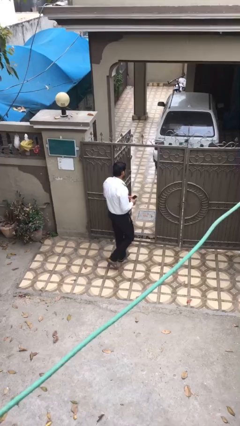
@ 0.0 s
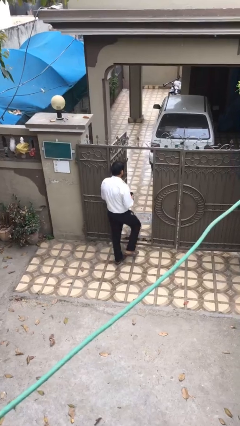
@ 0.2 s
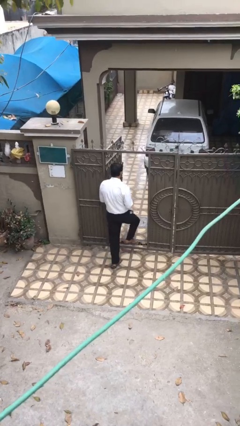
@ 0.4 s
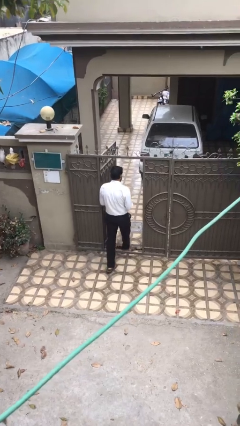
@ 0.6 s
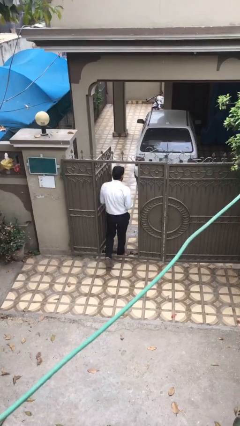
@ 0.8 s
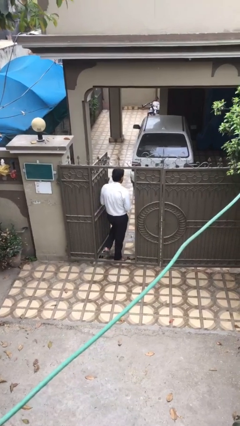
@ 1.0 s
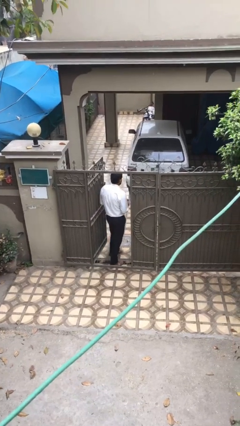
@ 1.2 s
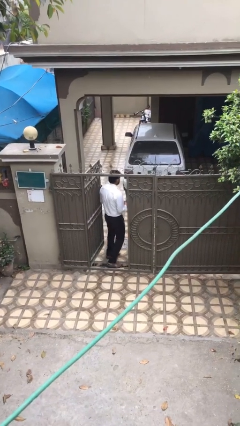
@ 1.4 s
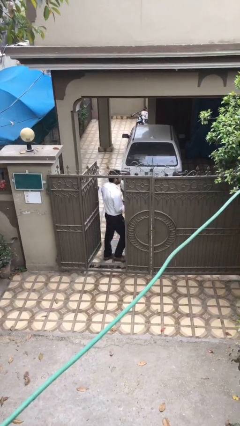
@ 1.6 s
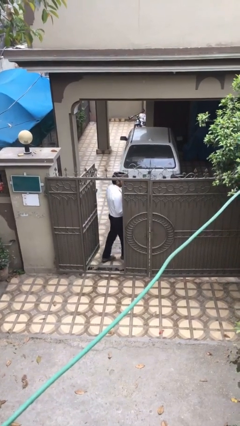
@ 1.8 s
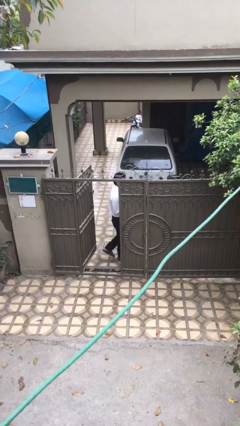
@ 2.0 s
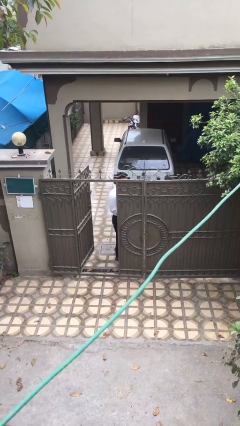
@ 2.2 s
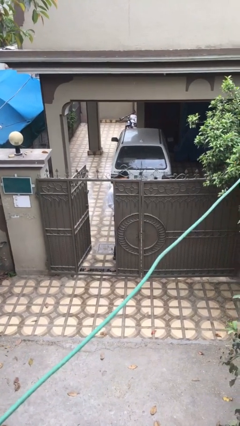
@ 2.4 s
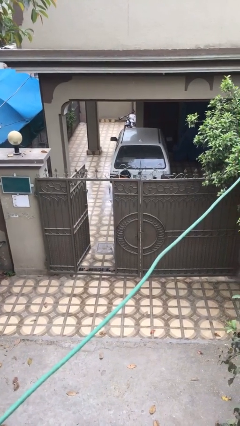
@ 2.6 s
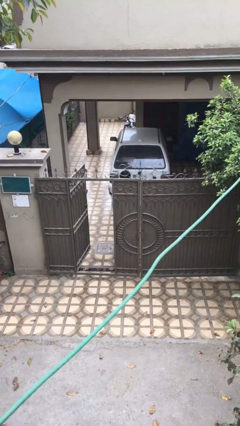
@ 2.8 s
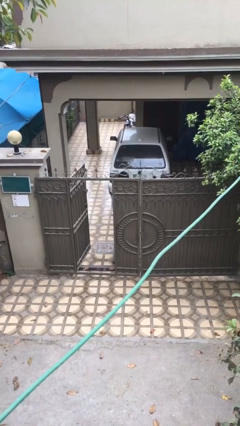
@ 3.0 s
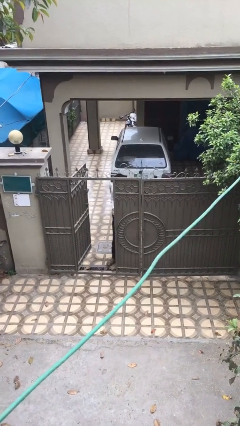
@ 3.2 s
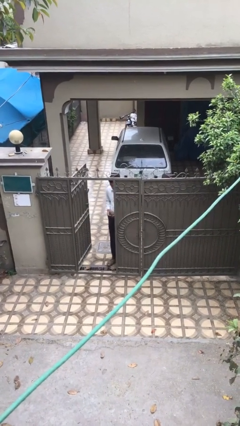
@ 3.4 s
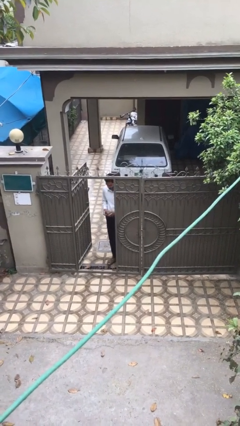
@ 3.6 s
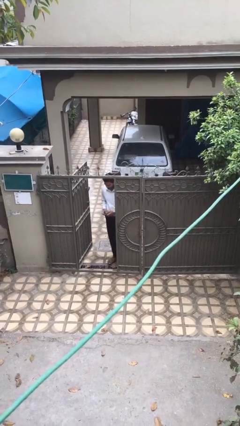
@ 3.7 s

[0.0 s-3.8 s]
person exits scene through structure

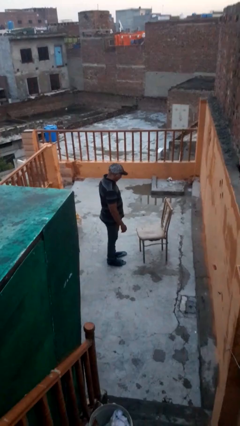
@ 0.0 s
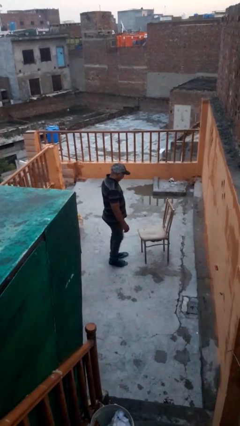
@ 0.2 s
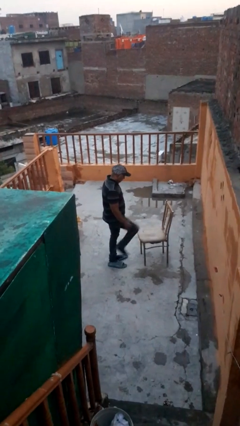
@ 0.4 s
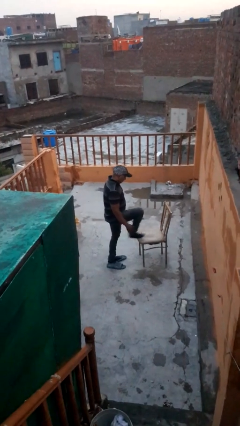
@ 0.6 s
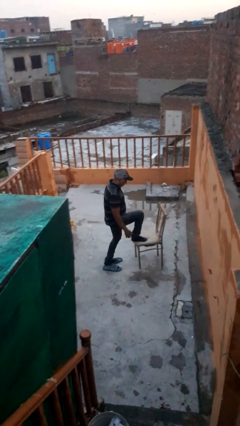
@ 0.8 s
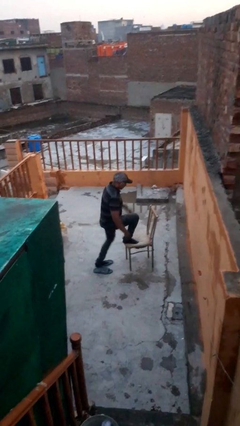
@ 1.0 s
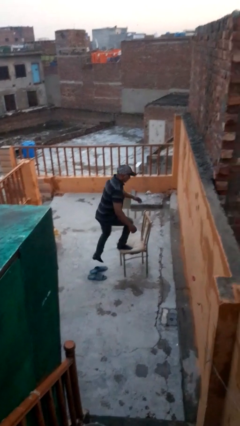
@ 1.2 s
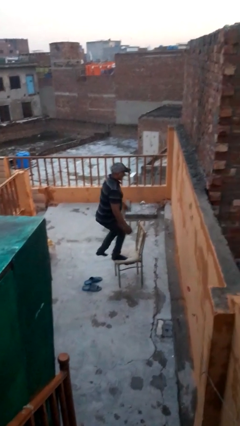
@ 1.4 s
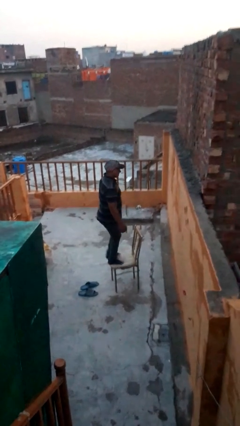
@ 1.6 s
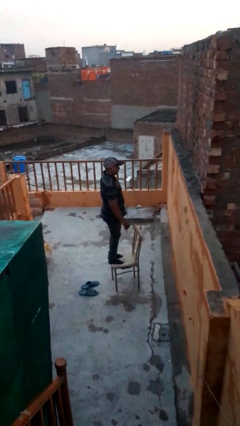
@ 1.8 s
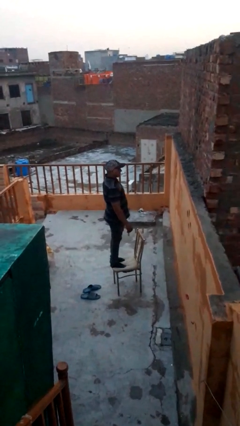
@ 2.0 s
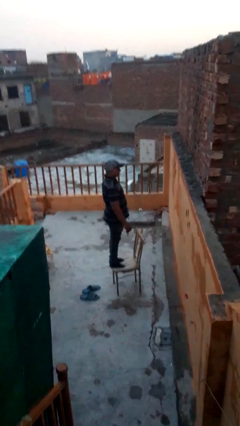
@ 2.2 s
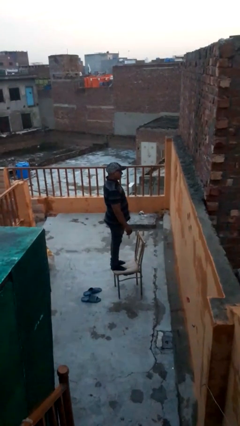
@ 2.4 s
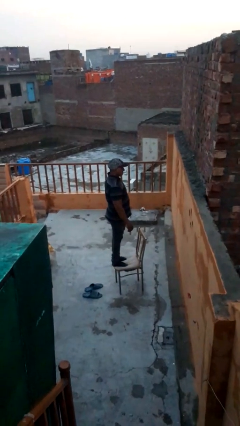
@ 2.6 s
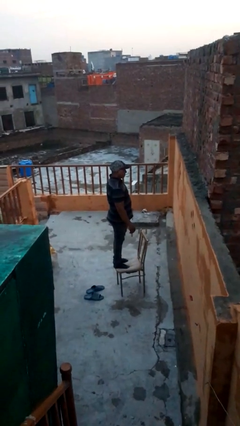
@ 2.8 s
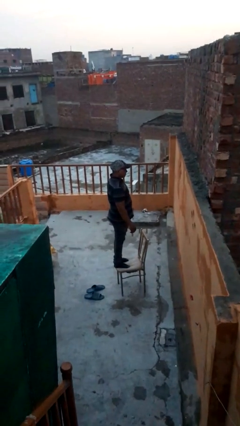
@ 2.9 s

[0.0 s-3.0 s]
person climbs on chair

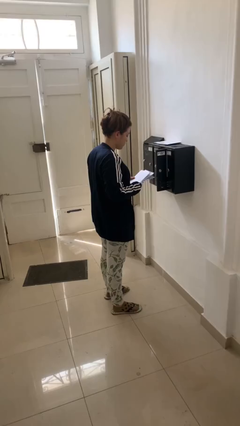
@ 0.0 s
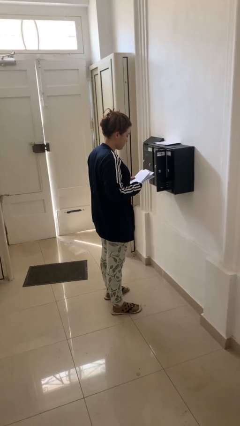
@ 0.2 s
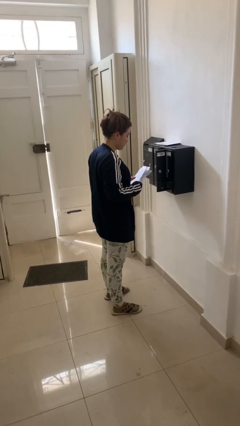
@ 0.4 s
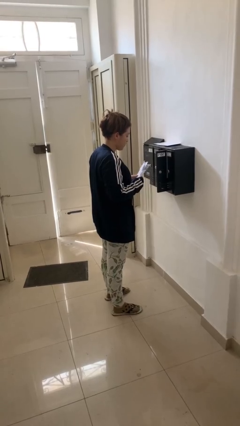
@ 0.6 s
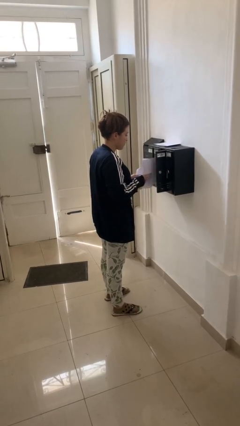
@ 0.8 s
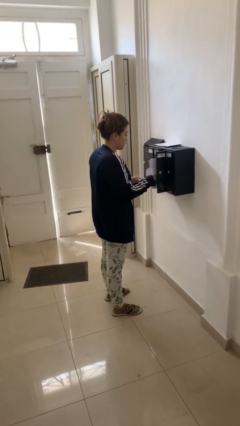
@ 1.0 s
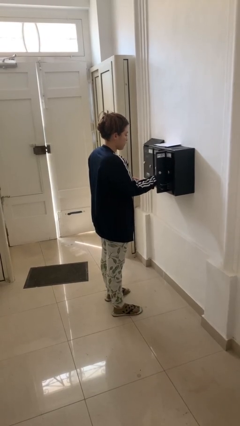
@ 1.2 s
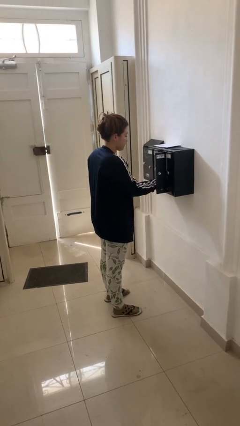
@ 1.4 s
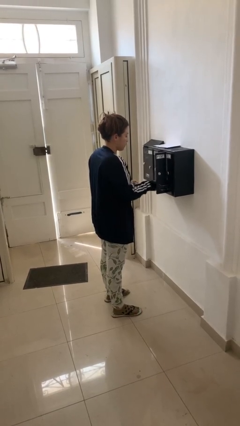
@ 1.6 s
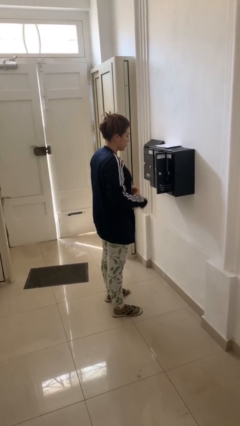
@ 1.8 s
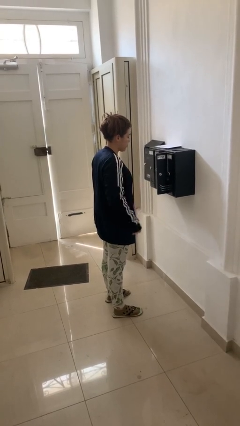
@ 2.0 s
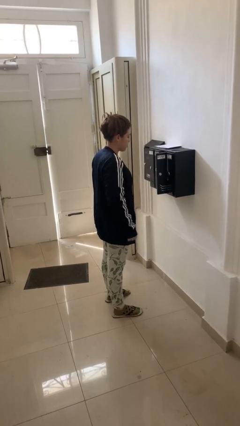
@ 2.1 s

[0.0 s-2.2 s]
person puts letters in mailbox

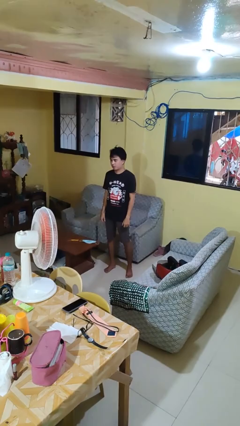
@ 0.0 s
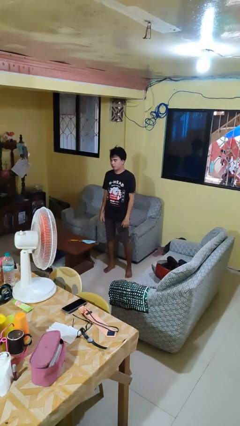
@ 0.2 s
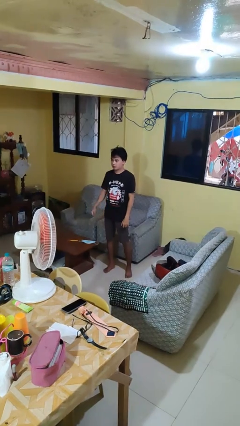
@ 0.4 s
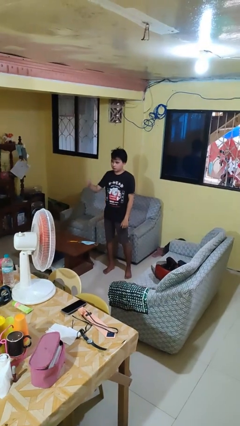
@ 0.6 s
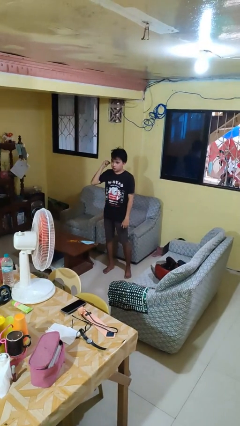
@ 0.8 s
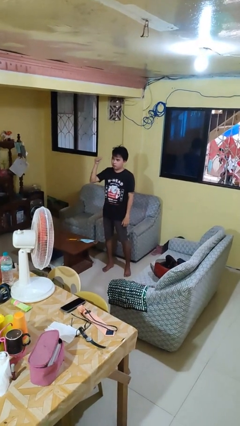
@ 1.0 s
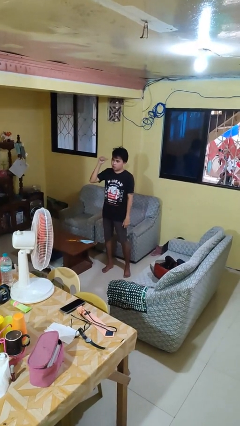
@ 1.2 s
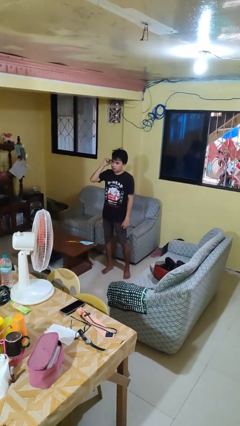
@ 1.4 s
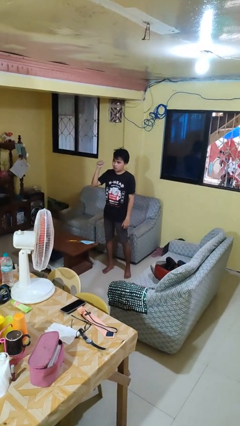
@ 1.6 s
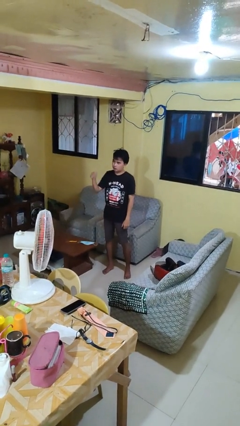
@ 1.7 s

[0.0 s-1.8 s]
person gestures behind me

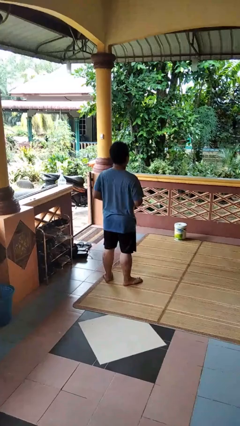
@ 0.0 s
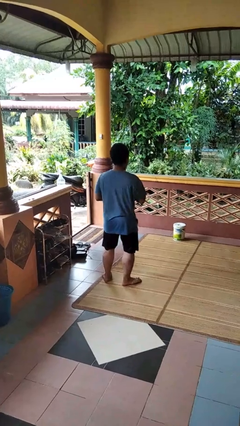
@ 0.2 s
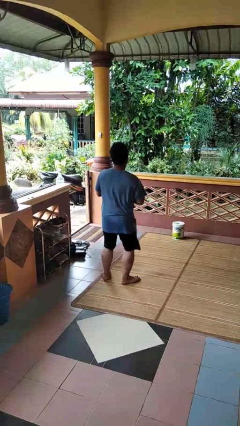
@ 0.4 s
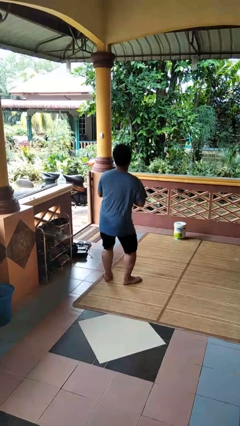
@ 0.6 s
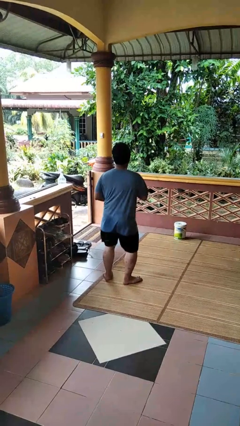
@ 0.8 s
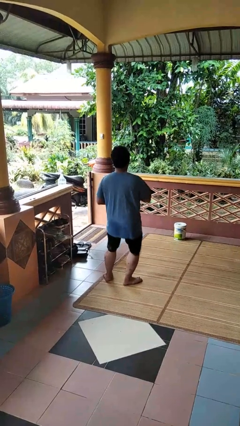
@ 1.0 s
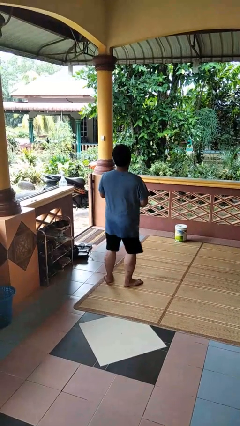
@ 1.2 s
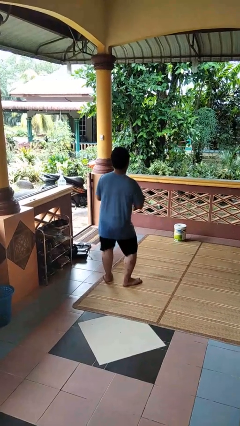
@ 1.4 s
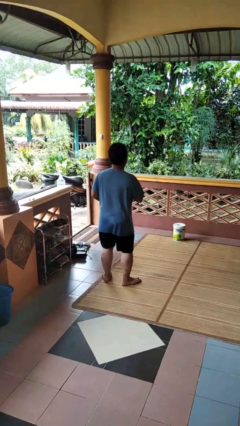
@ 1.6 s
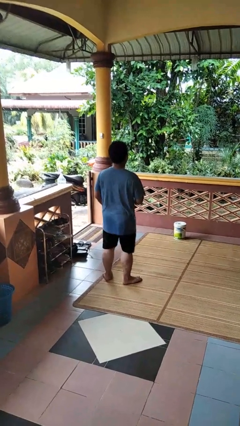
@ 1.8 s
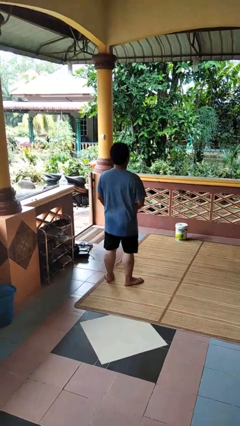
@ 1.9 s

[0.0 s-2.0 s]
person dances in place

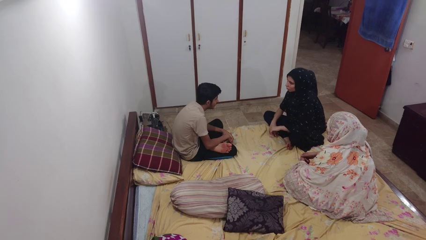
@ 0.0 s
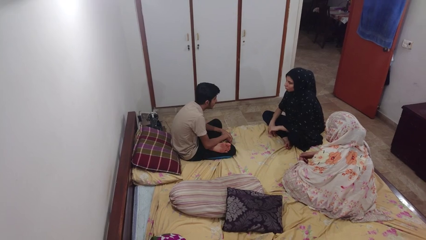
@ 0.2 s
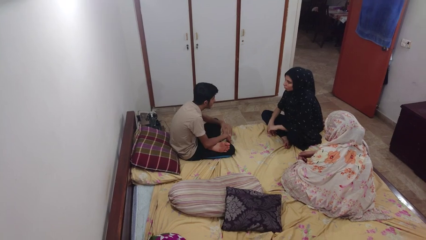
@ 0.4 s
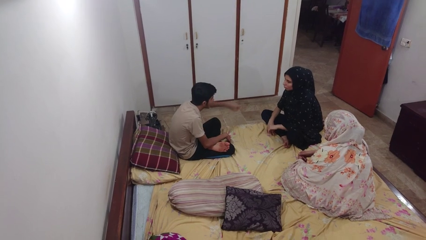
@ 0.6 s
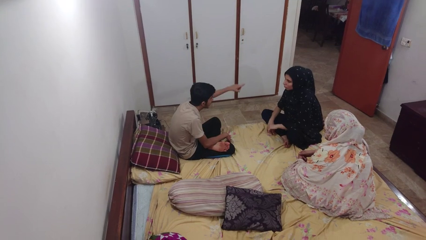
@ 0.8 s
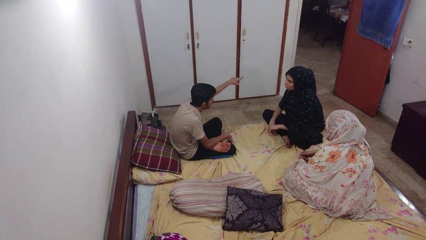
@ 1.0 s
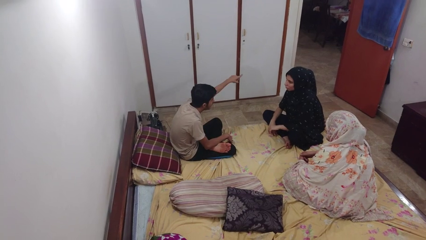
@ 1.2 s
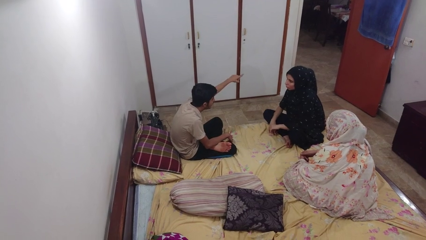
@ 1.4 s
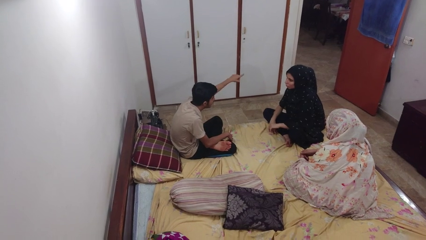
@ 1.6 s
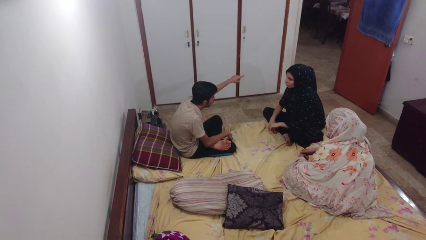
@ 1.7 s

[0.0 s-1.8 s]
person points at person

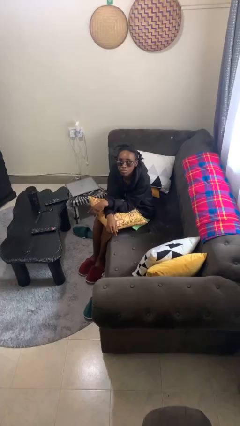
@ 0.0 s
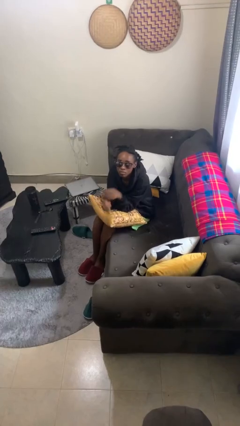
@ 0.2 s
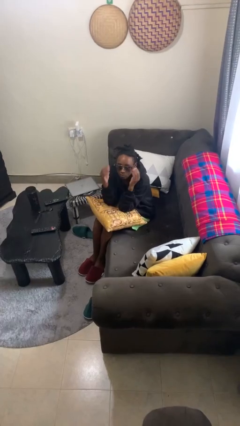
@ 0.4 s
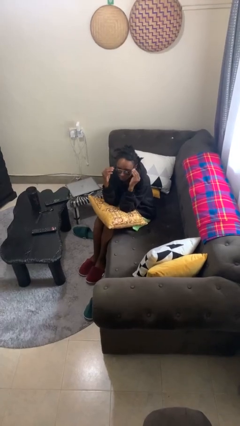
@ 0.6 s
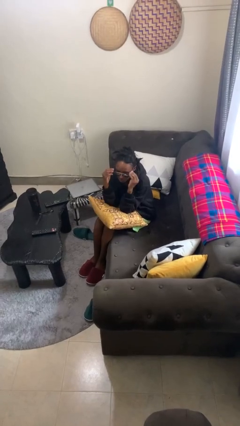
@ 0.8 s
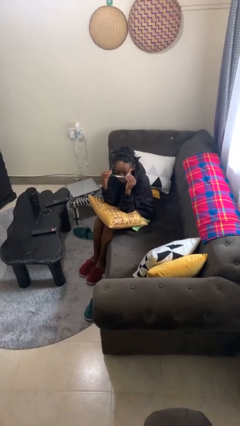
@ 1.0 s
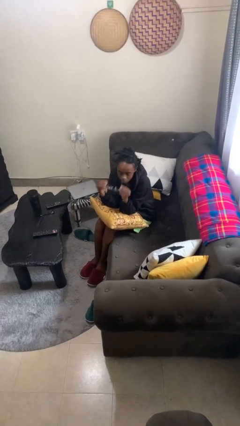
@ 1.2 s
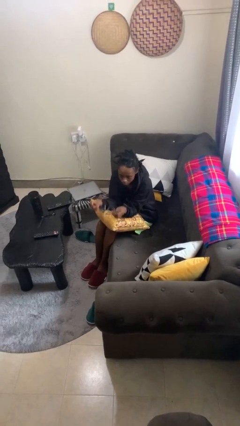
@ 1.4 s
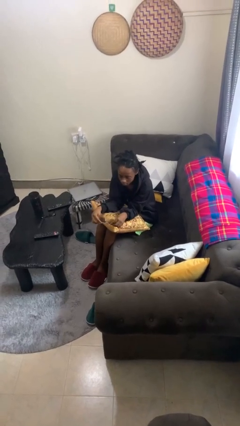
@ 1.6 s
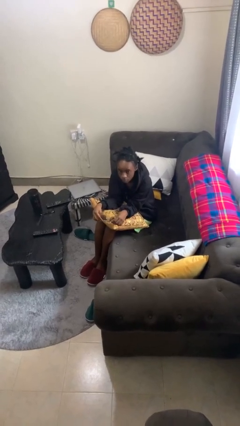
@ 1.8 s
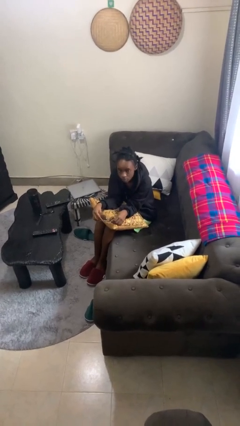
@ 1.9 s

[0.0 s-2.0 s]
person takes off sunglasses
